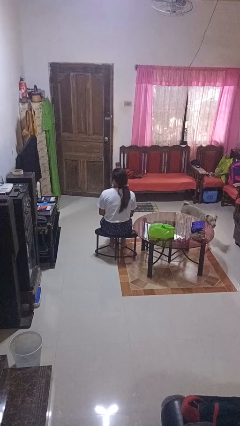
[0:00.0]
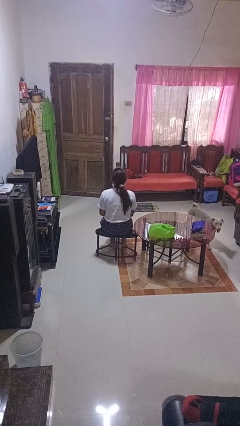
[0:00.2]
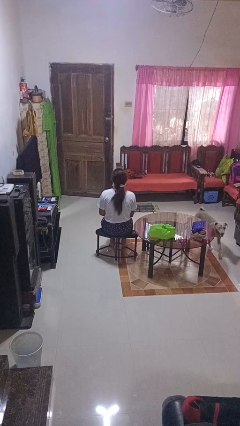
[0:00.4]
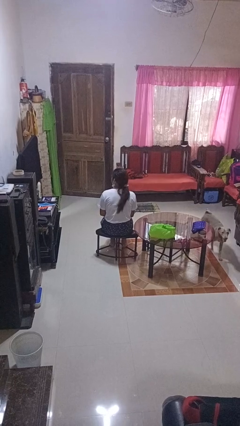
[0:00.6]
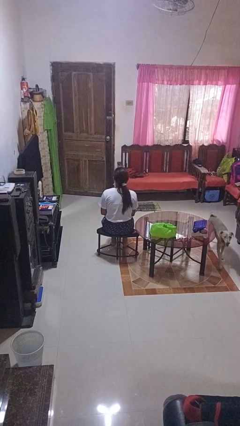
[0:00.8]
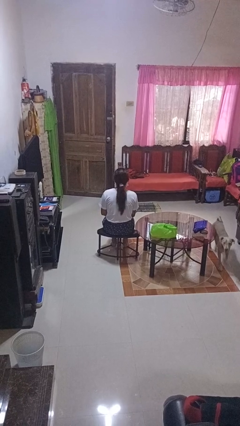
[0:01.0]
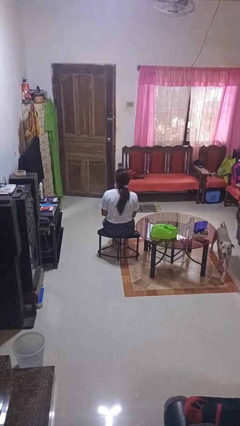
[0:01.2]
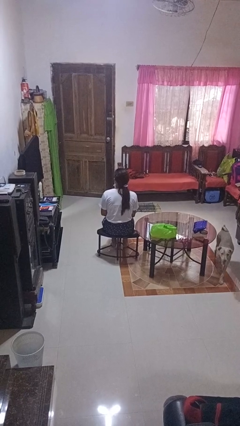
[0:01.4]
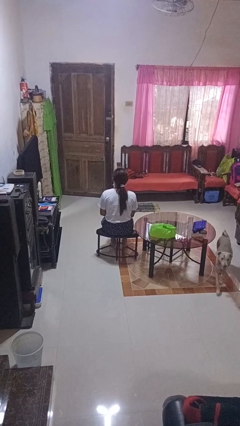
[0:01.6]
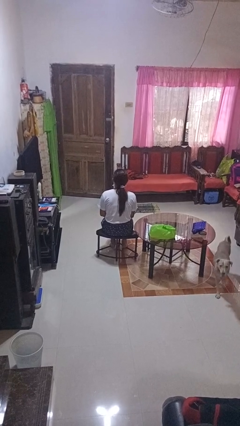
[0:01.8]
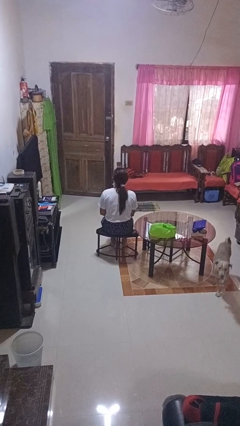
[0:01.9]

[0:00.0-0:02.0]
person shakes head

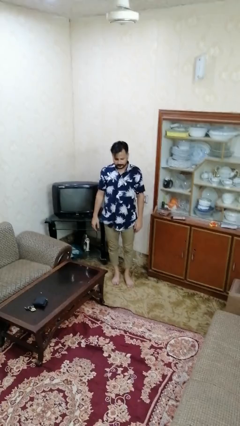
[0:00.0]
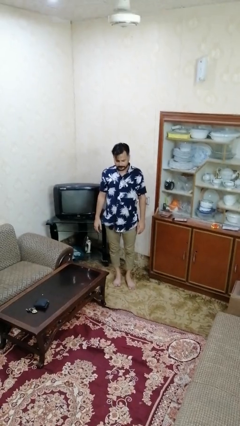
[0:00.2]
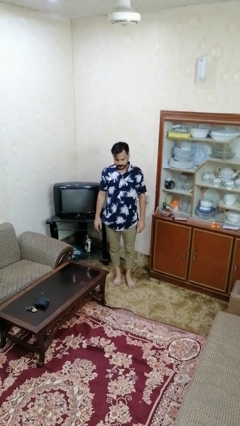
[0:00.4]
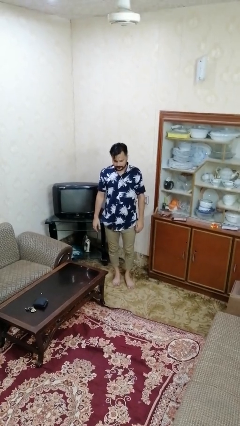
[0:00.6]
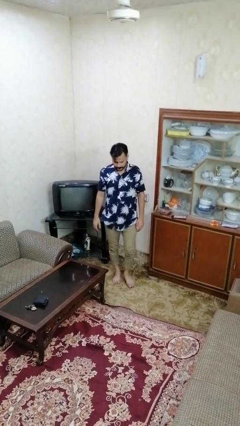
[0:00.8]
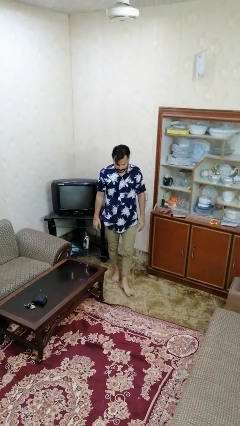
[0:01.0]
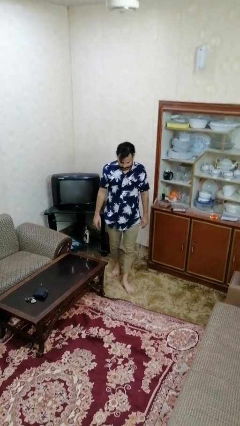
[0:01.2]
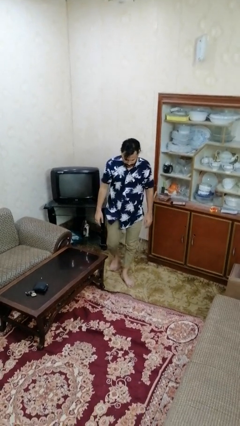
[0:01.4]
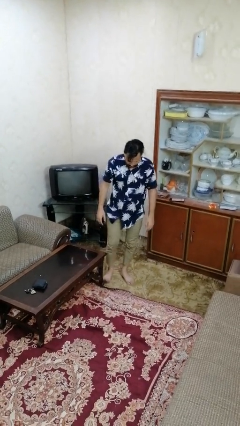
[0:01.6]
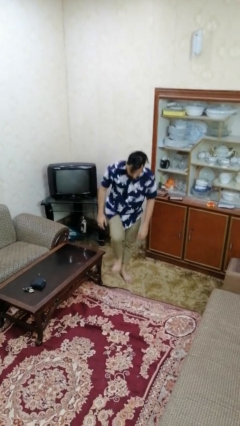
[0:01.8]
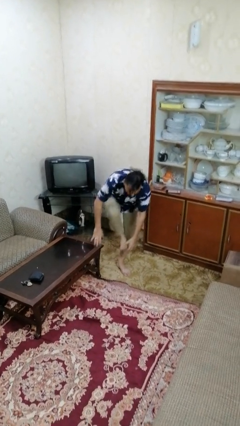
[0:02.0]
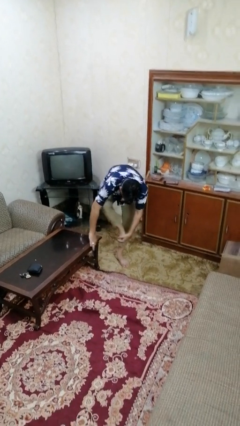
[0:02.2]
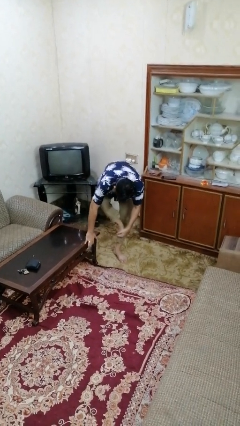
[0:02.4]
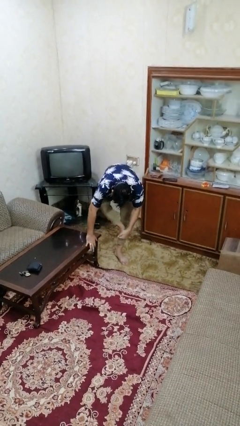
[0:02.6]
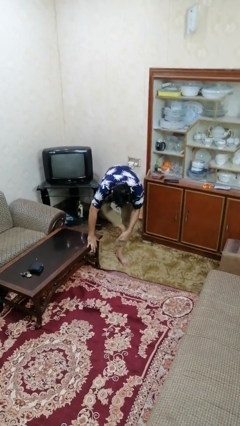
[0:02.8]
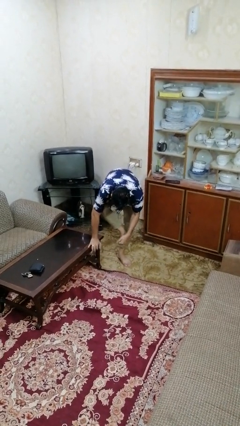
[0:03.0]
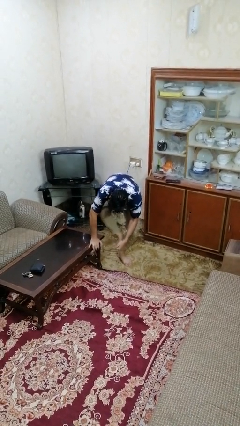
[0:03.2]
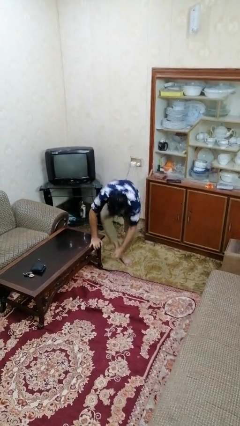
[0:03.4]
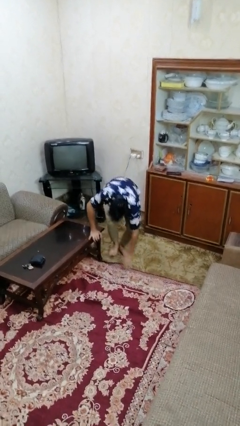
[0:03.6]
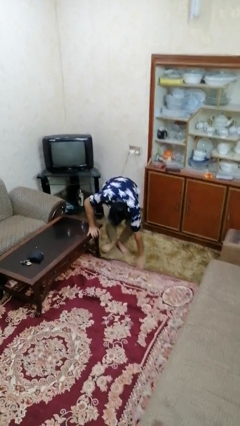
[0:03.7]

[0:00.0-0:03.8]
person trips on object on floor

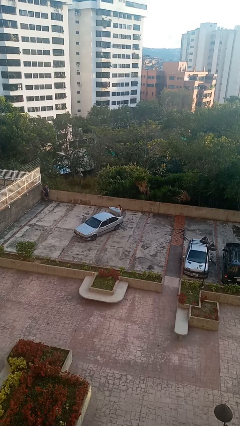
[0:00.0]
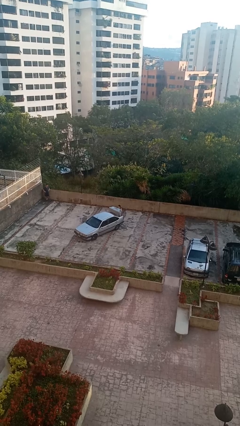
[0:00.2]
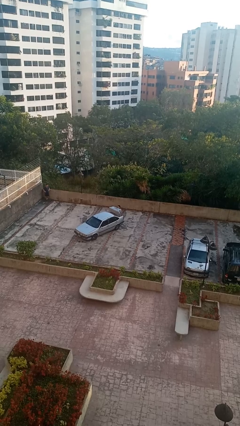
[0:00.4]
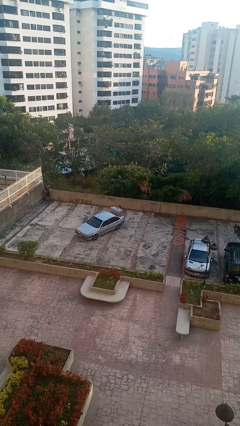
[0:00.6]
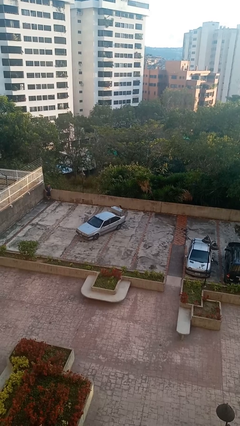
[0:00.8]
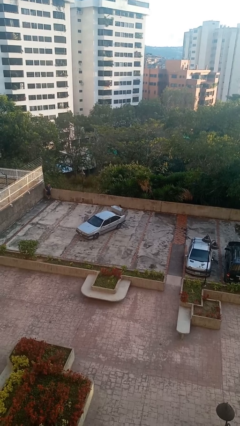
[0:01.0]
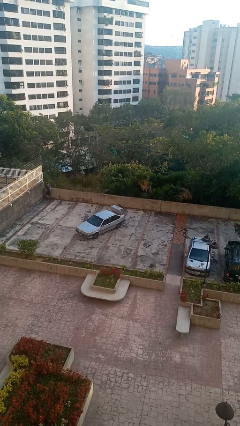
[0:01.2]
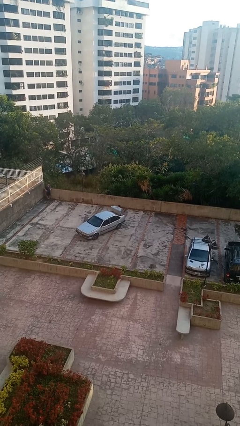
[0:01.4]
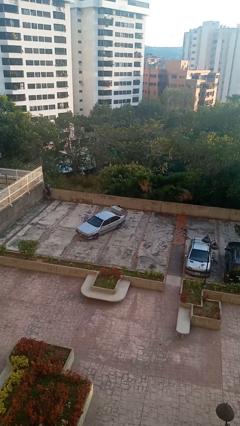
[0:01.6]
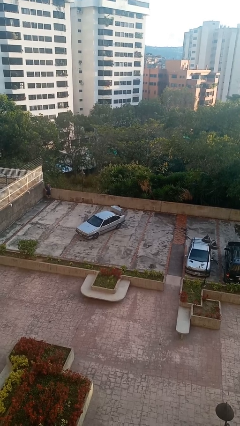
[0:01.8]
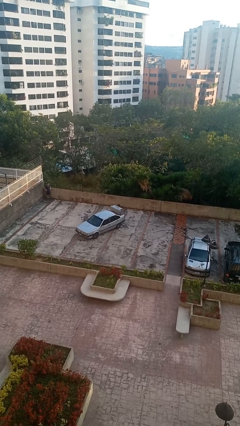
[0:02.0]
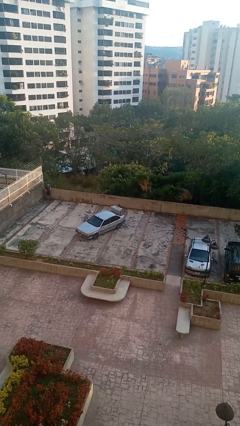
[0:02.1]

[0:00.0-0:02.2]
person loads car

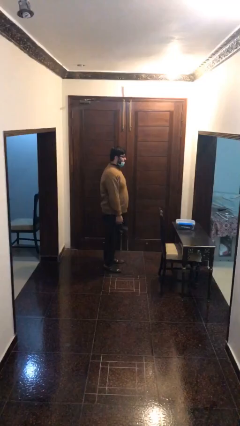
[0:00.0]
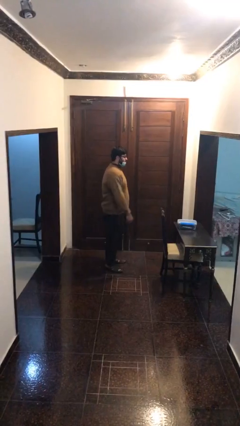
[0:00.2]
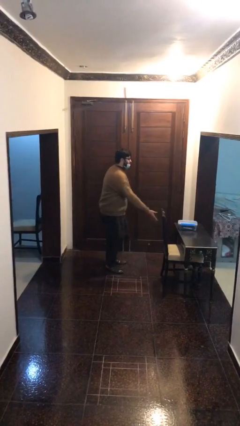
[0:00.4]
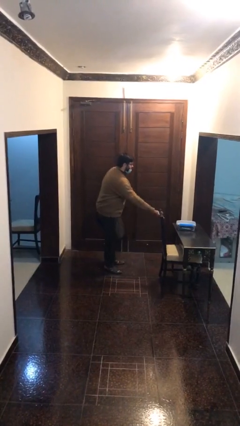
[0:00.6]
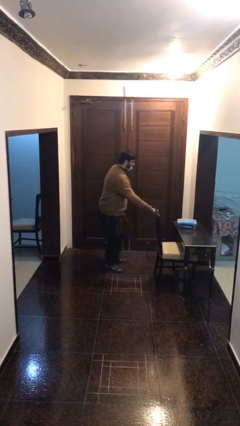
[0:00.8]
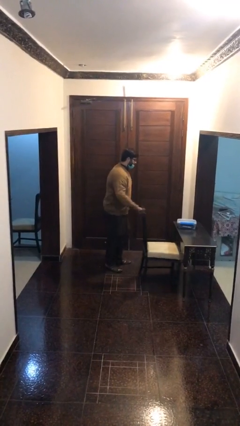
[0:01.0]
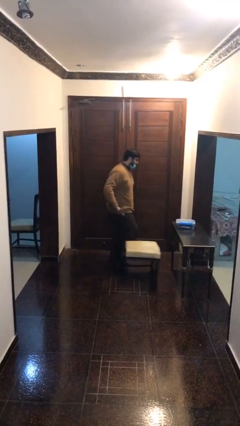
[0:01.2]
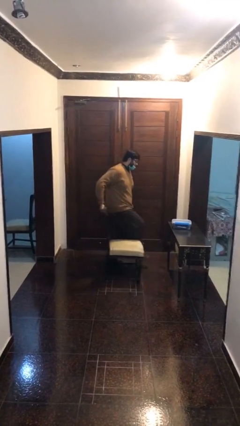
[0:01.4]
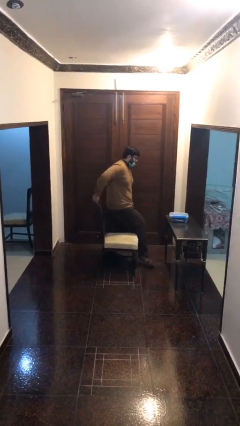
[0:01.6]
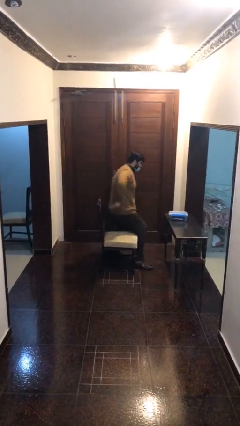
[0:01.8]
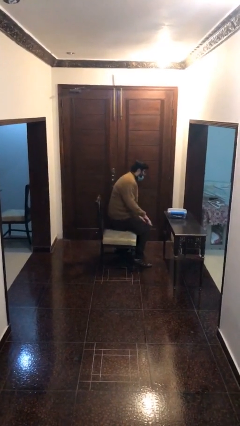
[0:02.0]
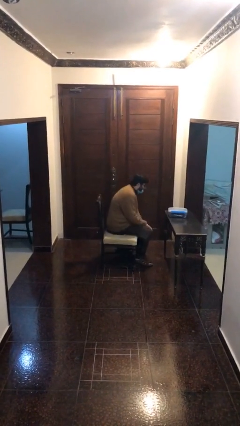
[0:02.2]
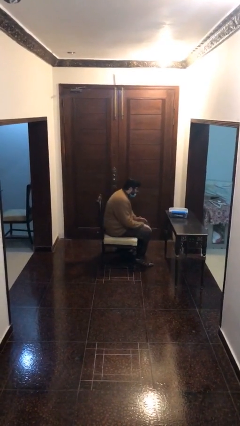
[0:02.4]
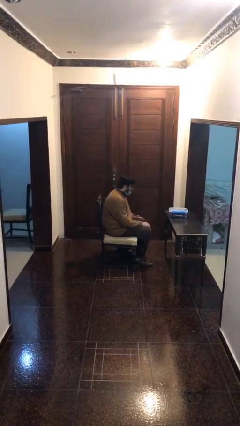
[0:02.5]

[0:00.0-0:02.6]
person sits down

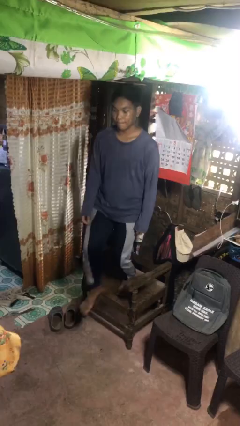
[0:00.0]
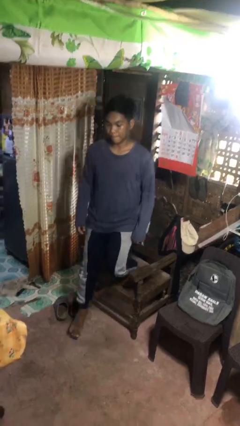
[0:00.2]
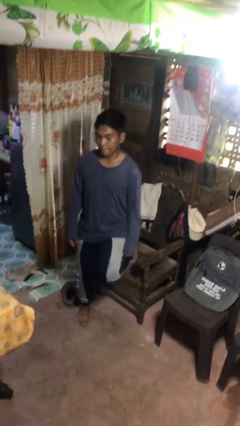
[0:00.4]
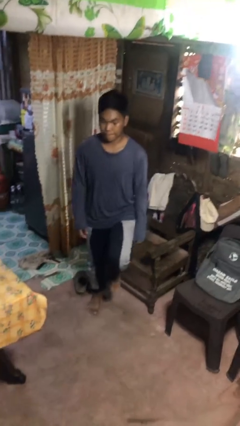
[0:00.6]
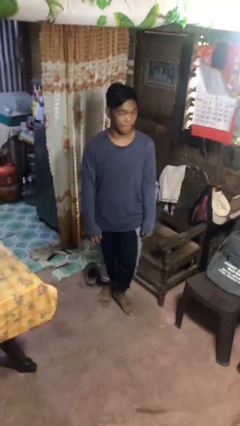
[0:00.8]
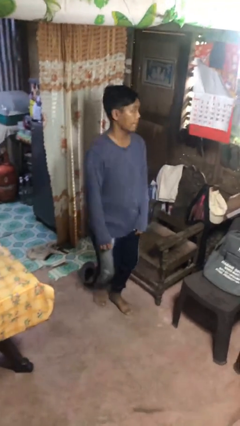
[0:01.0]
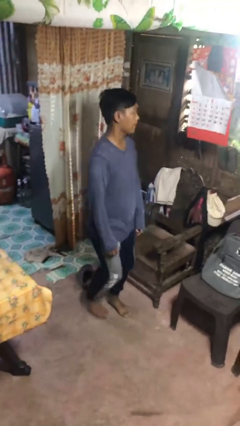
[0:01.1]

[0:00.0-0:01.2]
person climbs off chair

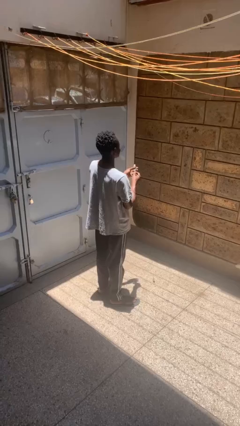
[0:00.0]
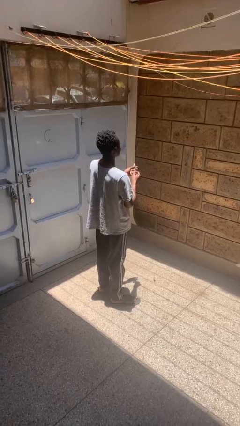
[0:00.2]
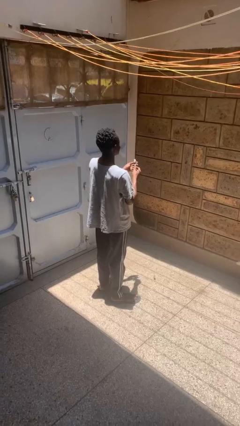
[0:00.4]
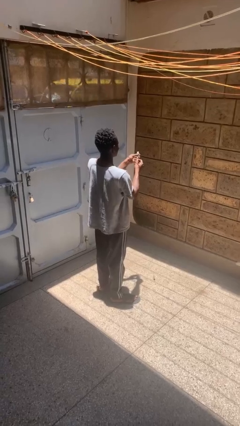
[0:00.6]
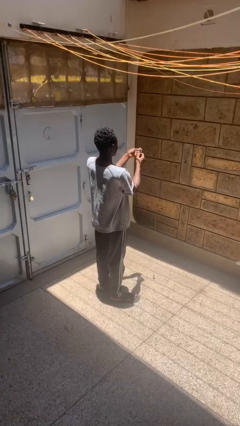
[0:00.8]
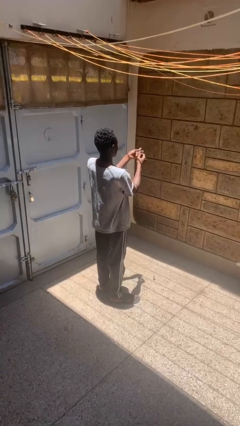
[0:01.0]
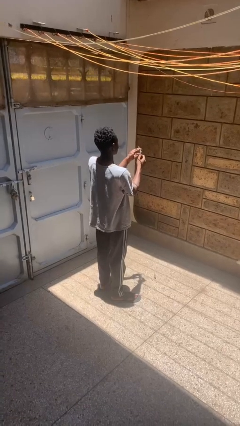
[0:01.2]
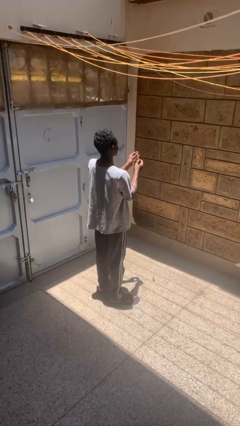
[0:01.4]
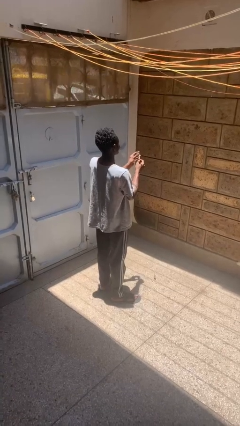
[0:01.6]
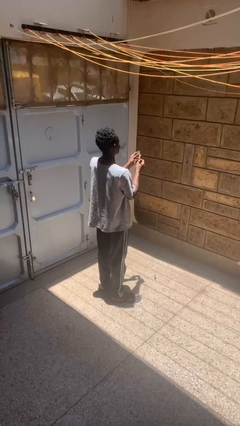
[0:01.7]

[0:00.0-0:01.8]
person clips fingernails

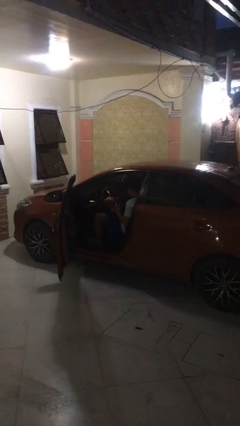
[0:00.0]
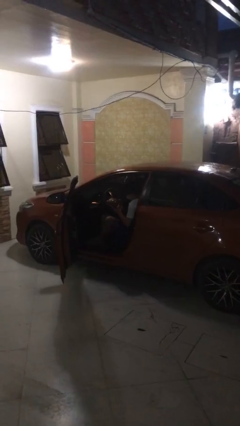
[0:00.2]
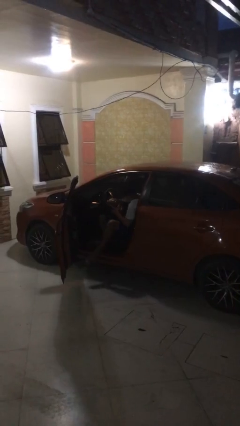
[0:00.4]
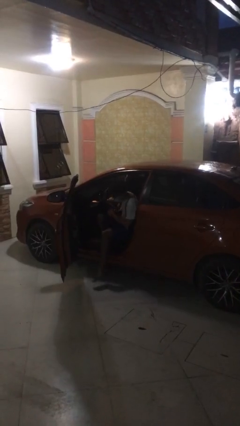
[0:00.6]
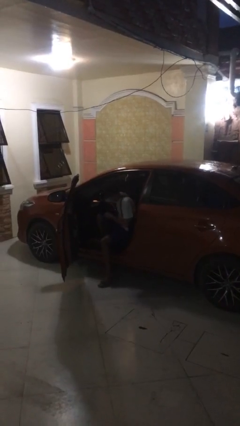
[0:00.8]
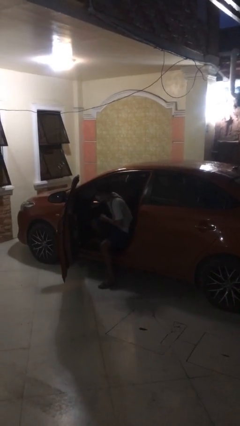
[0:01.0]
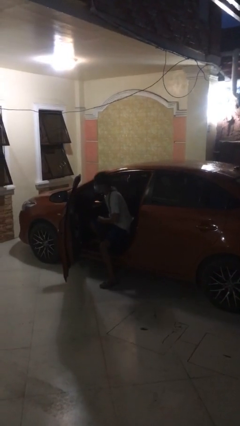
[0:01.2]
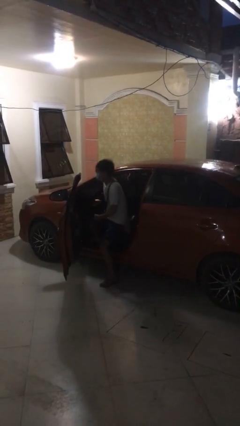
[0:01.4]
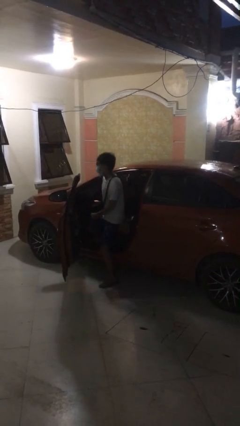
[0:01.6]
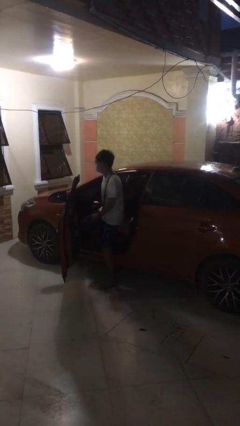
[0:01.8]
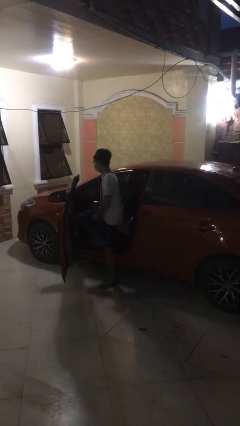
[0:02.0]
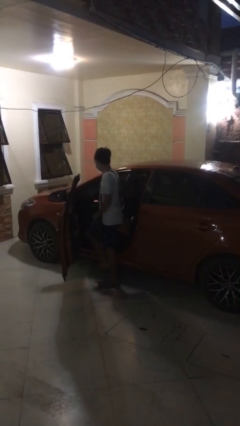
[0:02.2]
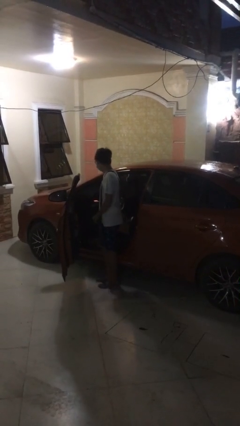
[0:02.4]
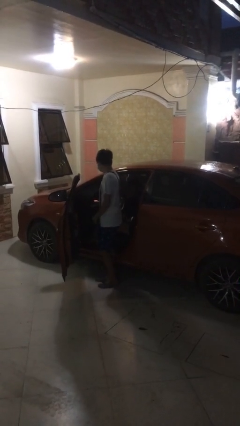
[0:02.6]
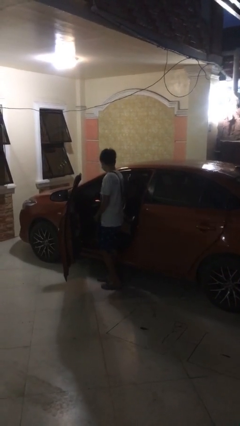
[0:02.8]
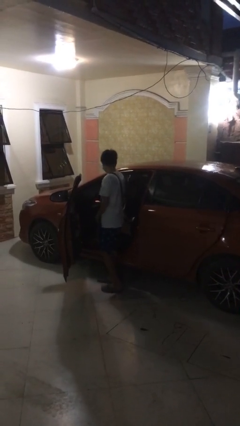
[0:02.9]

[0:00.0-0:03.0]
person exits car

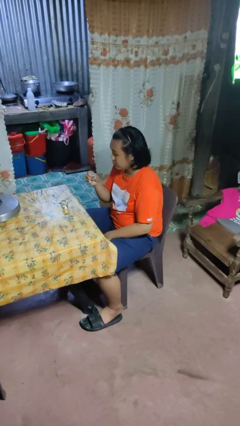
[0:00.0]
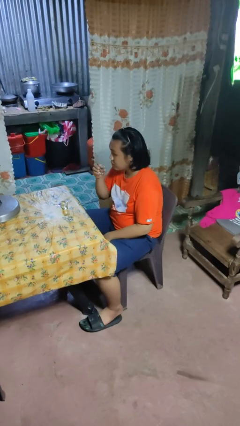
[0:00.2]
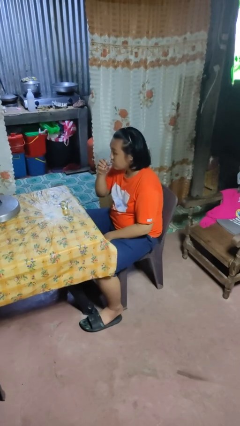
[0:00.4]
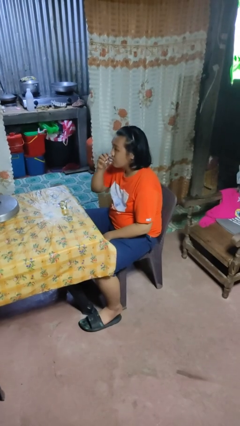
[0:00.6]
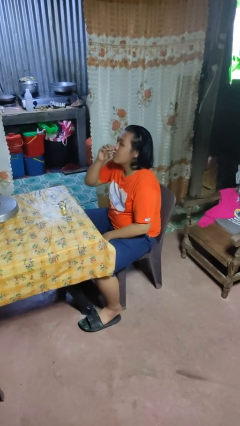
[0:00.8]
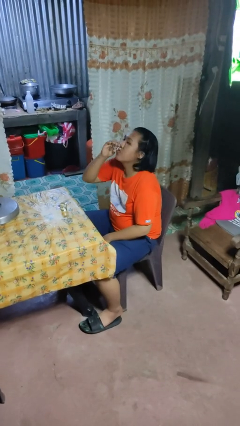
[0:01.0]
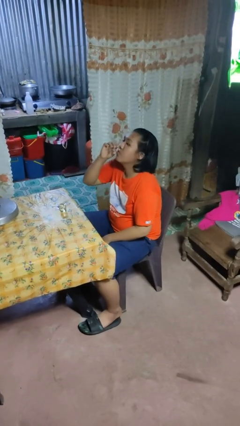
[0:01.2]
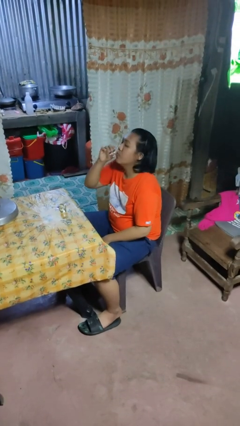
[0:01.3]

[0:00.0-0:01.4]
person drinks from shotglass
